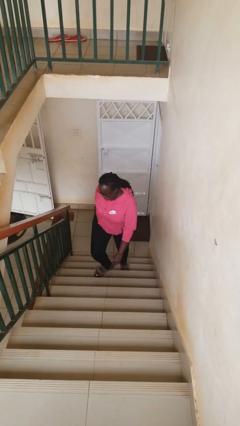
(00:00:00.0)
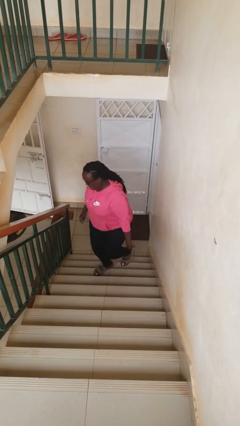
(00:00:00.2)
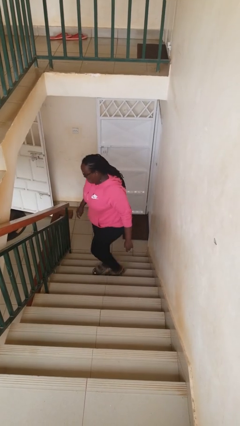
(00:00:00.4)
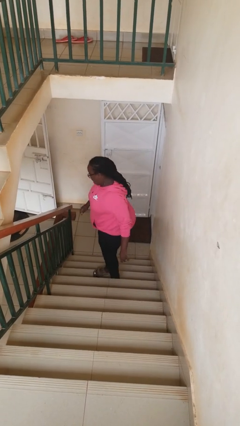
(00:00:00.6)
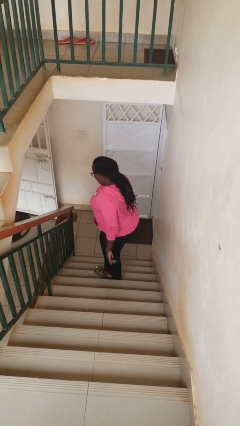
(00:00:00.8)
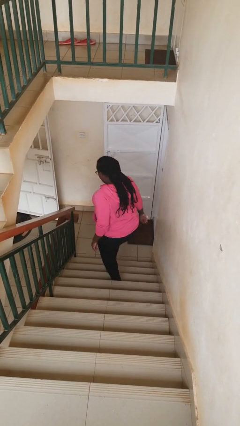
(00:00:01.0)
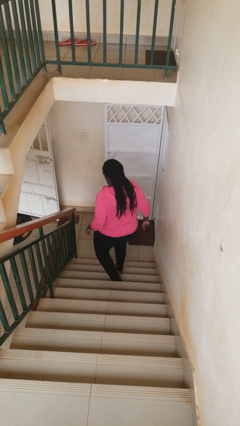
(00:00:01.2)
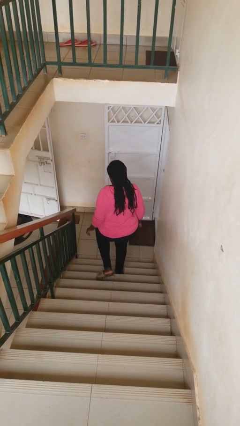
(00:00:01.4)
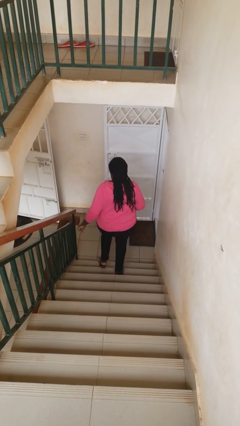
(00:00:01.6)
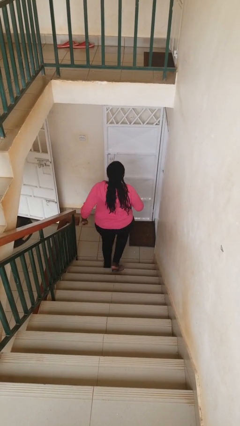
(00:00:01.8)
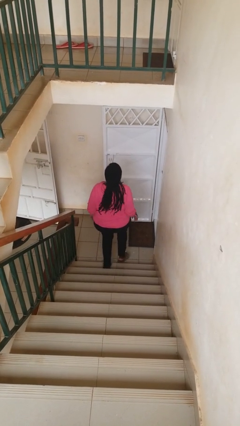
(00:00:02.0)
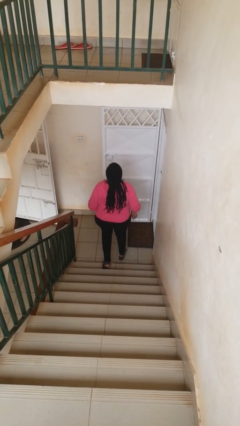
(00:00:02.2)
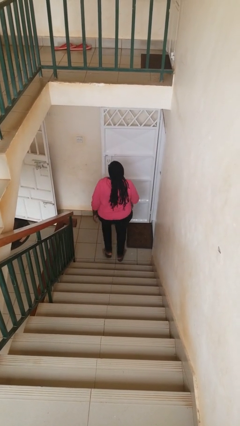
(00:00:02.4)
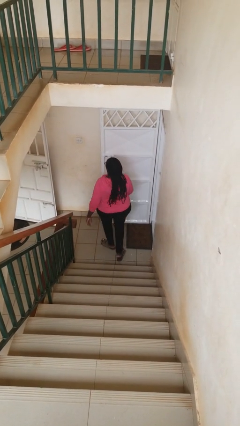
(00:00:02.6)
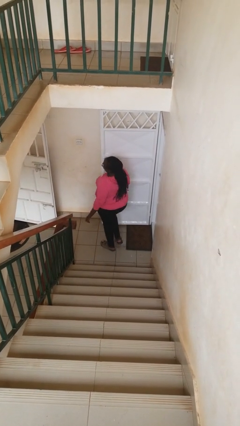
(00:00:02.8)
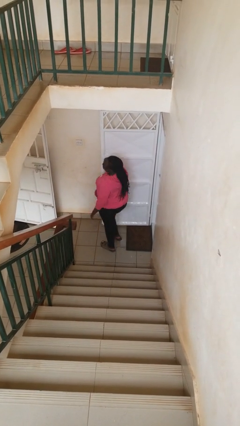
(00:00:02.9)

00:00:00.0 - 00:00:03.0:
person climbs down stairs

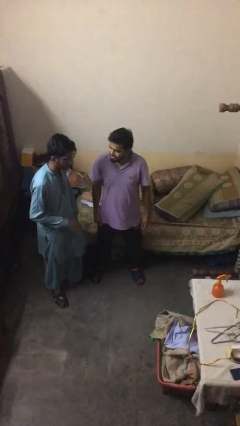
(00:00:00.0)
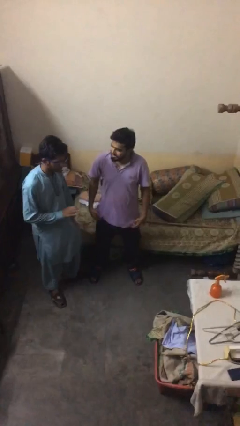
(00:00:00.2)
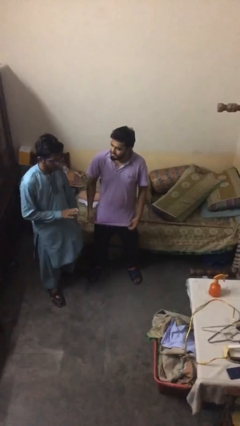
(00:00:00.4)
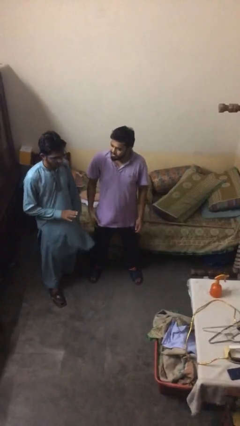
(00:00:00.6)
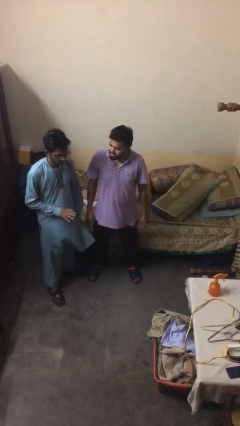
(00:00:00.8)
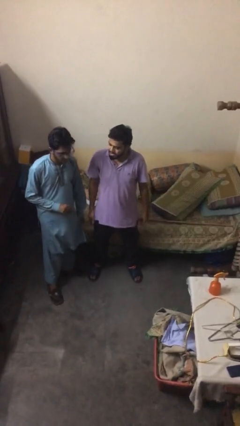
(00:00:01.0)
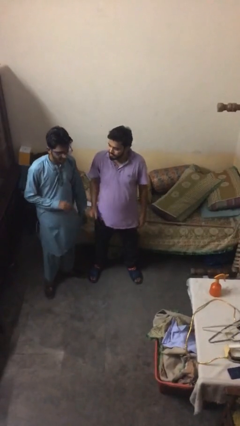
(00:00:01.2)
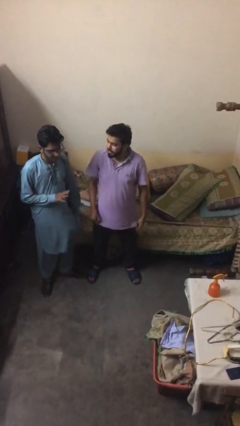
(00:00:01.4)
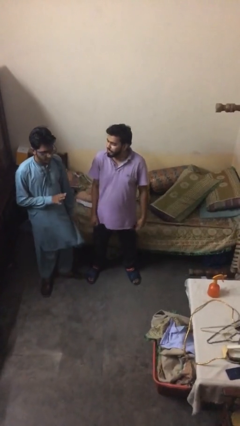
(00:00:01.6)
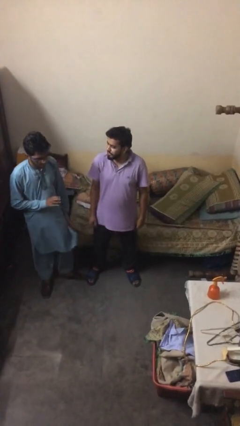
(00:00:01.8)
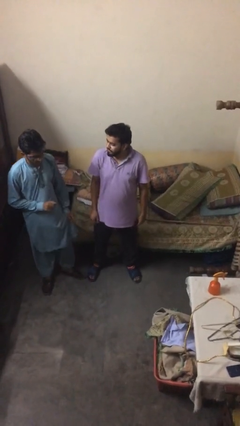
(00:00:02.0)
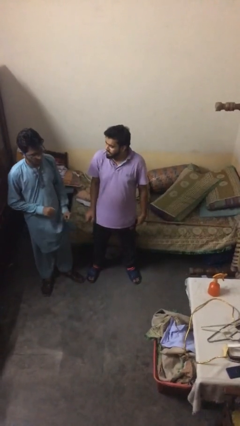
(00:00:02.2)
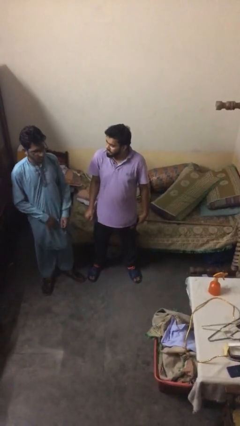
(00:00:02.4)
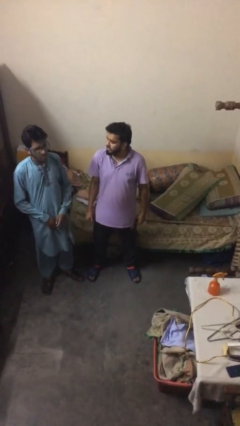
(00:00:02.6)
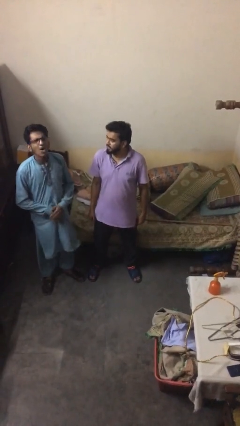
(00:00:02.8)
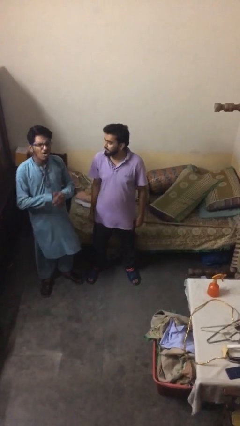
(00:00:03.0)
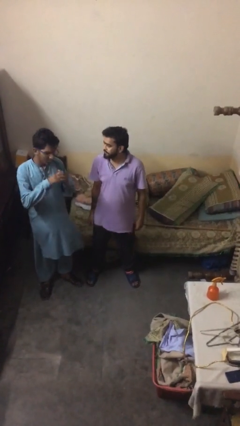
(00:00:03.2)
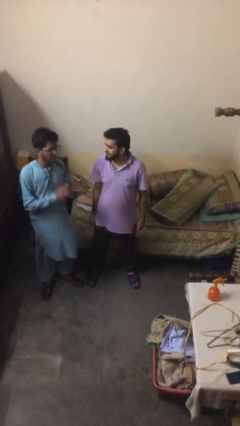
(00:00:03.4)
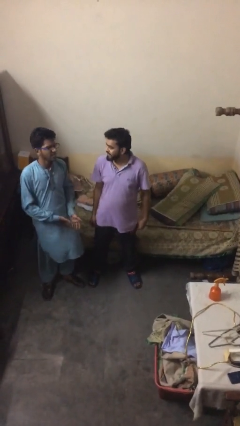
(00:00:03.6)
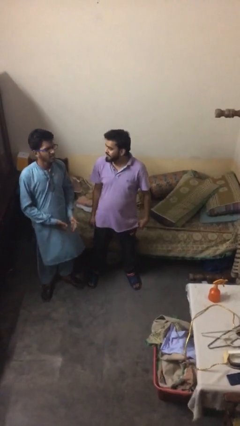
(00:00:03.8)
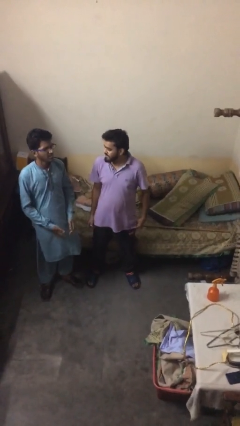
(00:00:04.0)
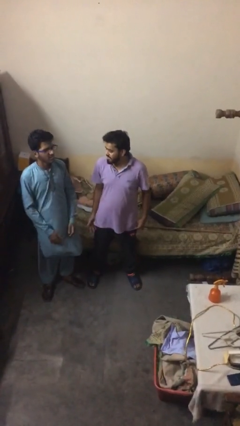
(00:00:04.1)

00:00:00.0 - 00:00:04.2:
person talks to person

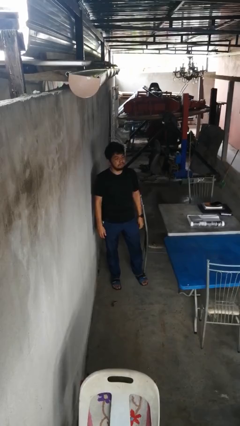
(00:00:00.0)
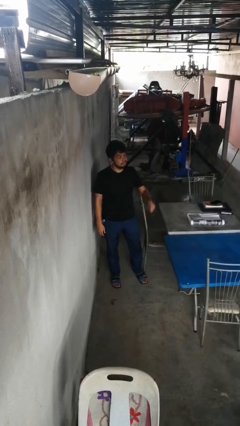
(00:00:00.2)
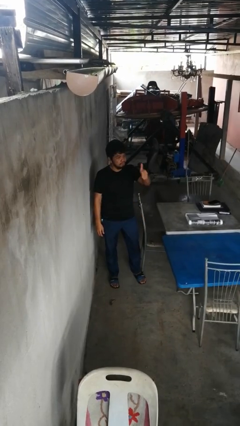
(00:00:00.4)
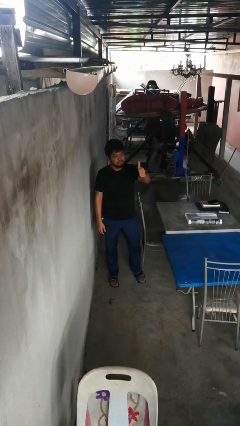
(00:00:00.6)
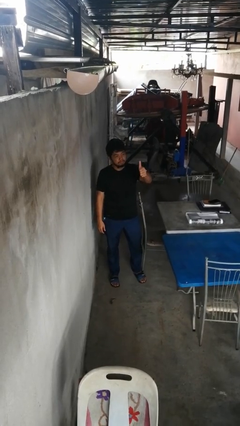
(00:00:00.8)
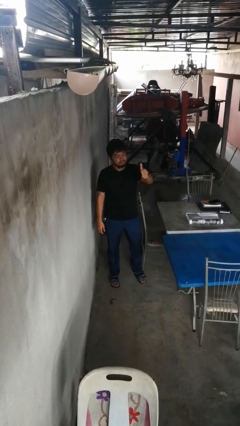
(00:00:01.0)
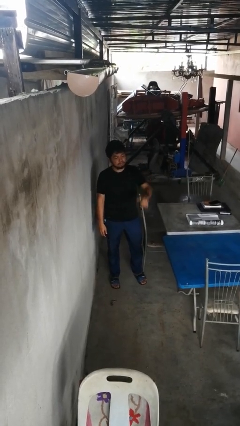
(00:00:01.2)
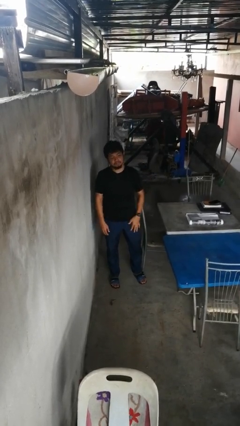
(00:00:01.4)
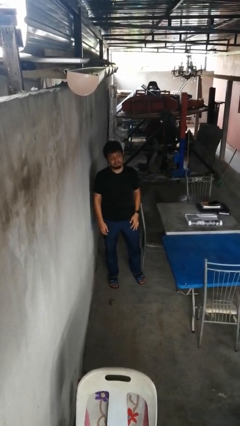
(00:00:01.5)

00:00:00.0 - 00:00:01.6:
person gestures thumbs up

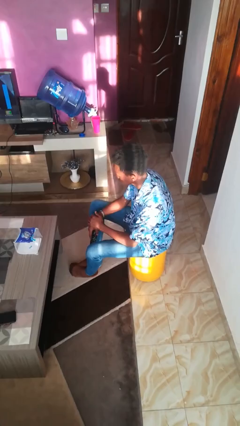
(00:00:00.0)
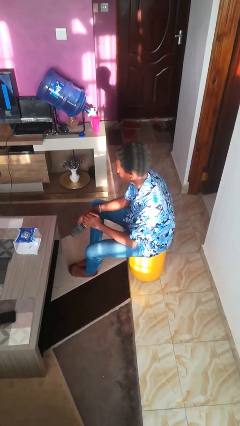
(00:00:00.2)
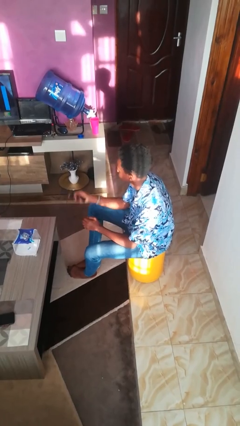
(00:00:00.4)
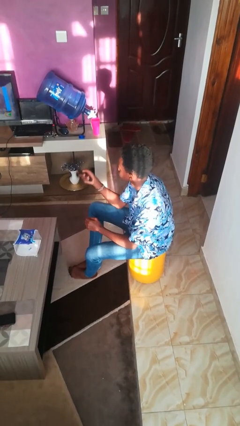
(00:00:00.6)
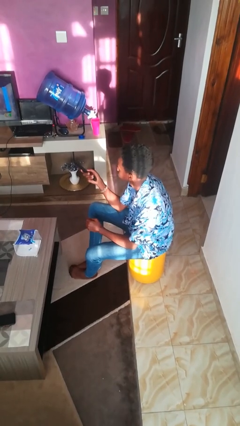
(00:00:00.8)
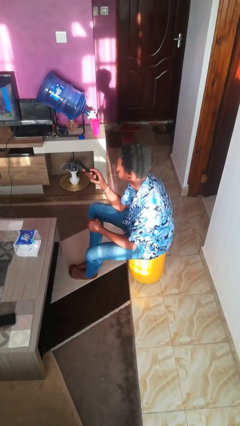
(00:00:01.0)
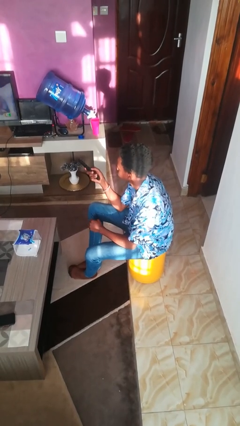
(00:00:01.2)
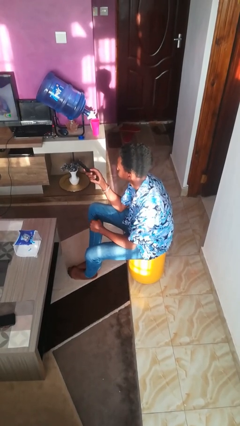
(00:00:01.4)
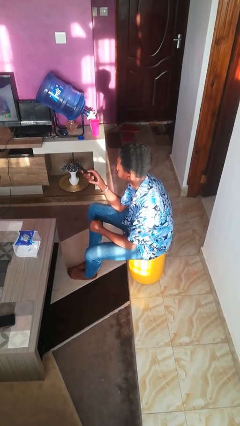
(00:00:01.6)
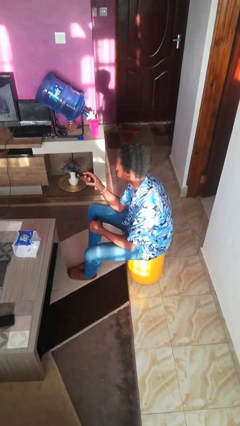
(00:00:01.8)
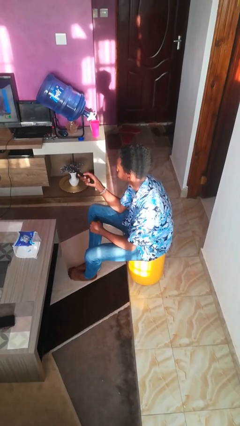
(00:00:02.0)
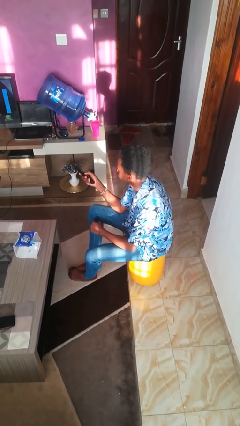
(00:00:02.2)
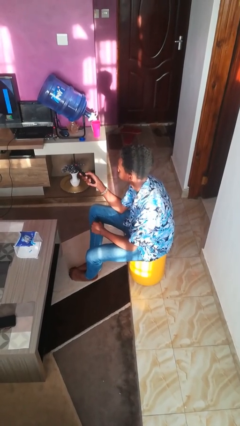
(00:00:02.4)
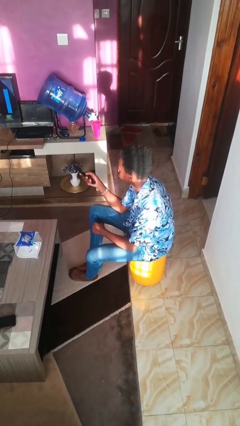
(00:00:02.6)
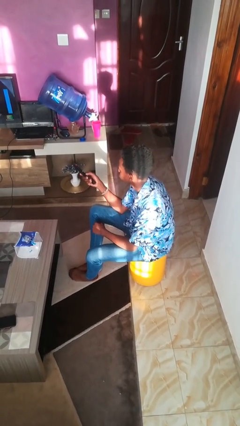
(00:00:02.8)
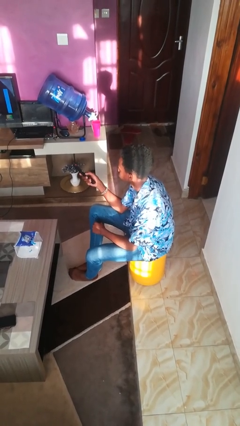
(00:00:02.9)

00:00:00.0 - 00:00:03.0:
person uses television remote

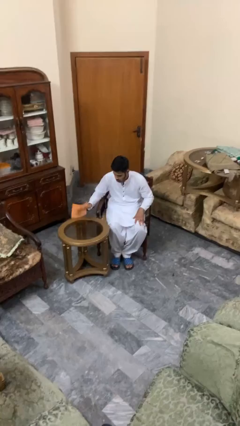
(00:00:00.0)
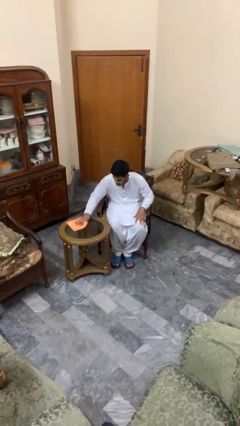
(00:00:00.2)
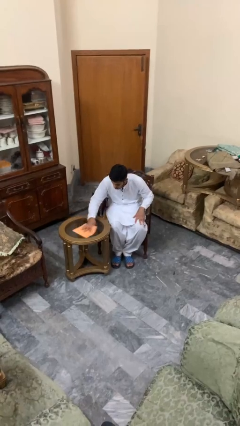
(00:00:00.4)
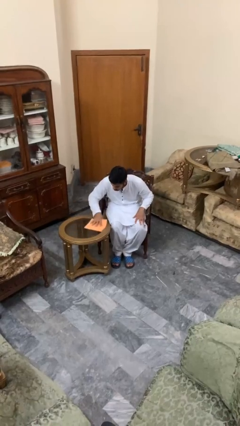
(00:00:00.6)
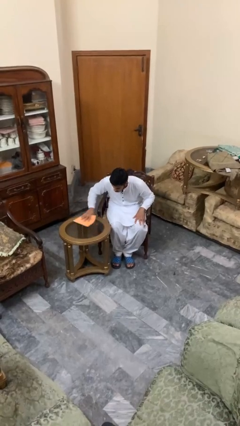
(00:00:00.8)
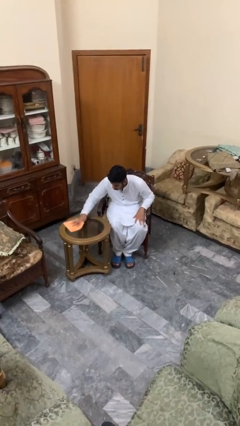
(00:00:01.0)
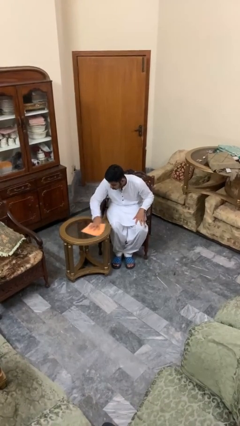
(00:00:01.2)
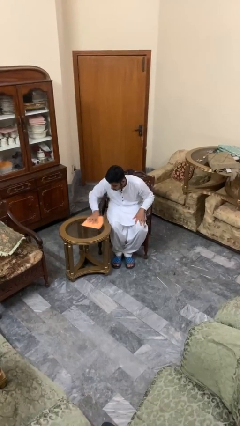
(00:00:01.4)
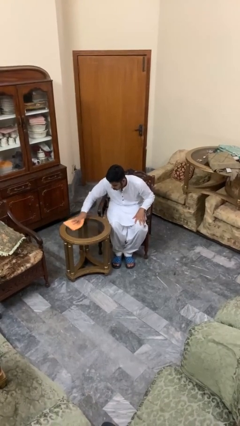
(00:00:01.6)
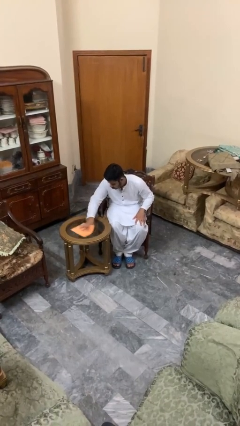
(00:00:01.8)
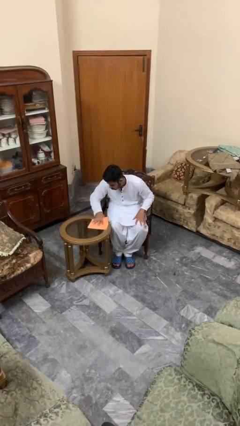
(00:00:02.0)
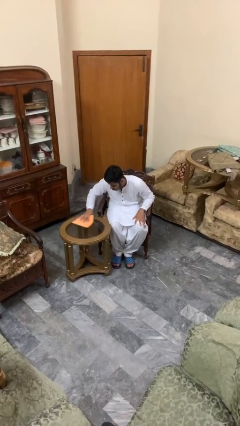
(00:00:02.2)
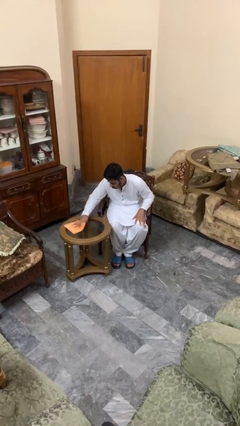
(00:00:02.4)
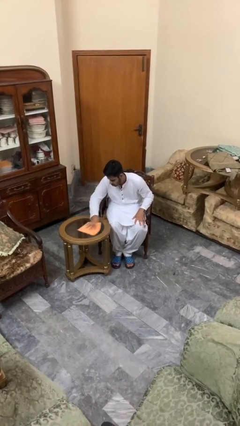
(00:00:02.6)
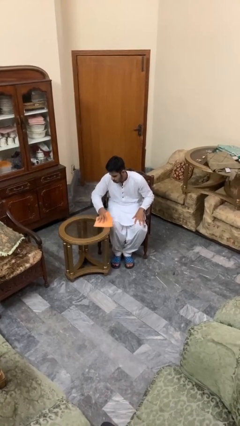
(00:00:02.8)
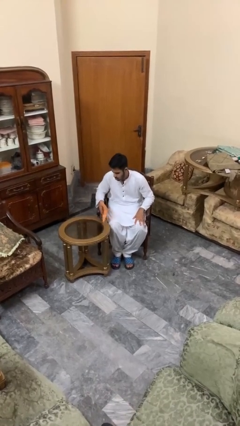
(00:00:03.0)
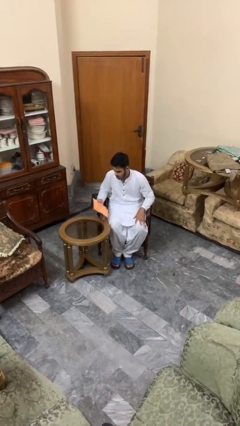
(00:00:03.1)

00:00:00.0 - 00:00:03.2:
person cleans table with rag

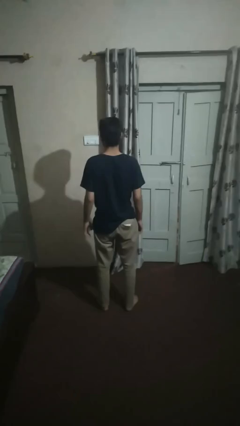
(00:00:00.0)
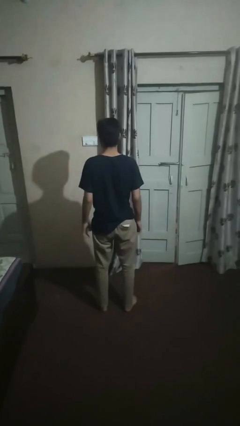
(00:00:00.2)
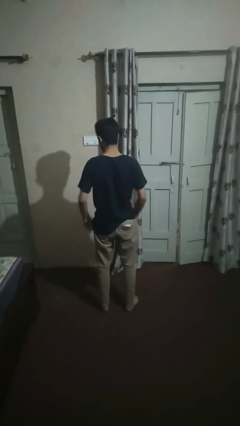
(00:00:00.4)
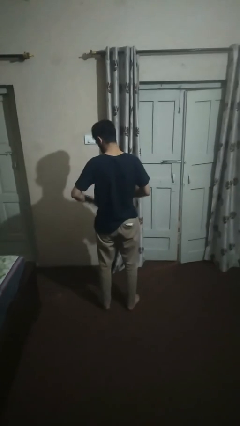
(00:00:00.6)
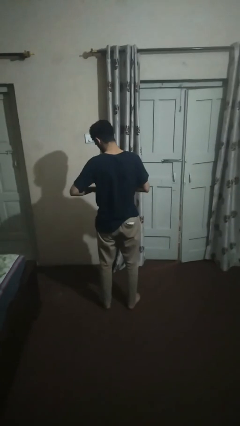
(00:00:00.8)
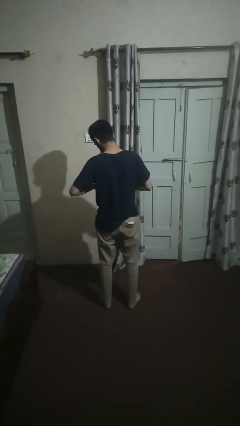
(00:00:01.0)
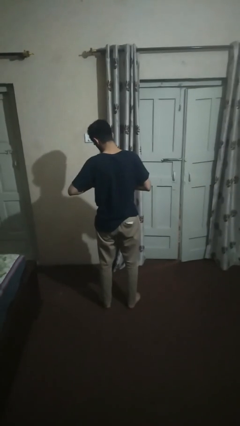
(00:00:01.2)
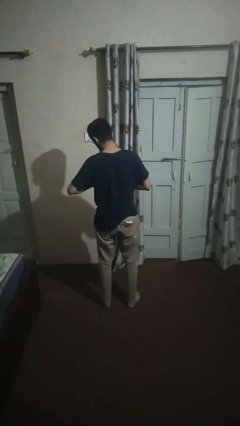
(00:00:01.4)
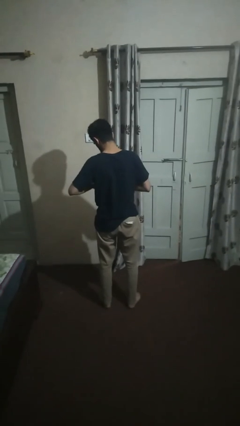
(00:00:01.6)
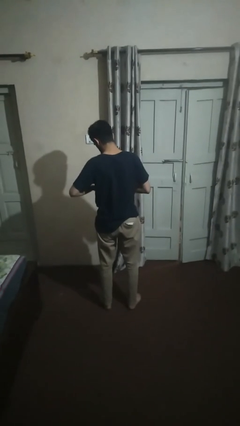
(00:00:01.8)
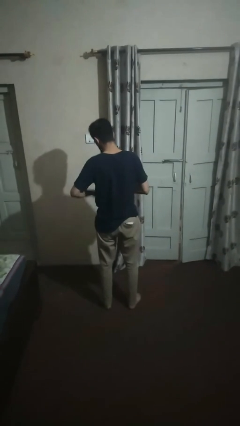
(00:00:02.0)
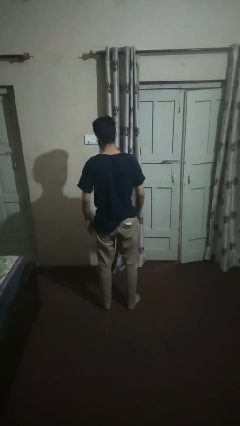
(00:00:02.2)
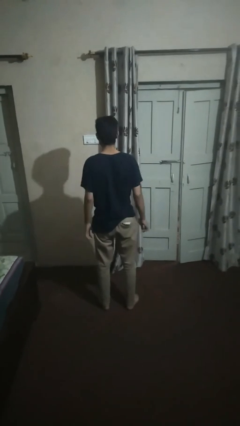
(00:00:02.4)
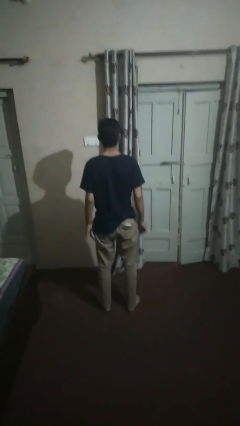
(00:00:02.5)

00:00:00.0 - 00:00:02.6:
person takes off ring
